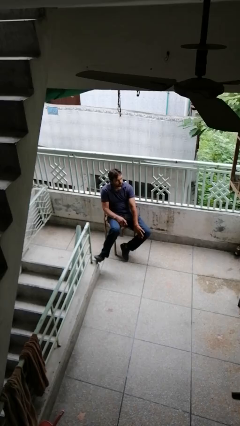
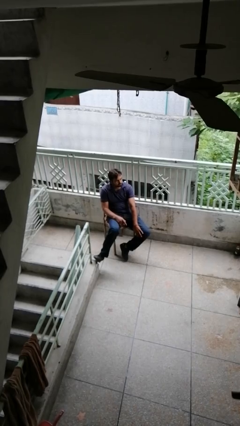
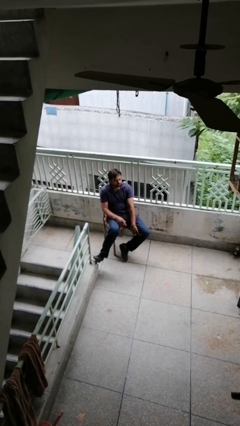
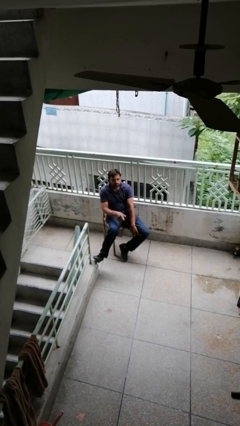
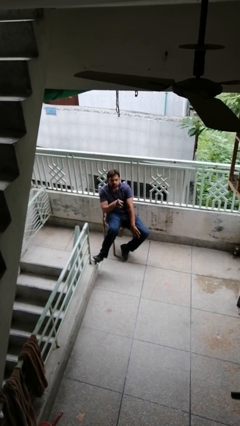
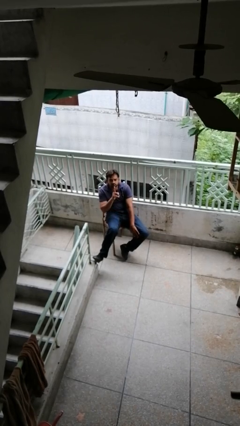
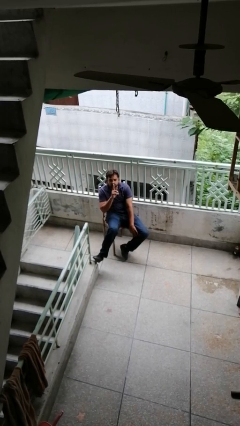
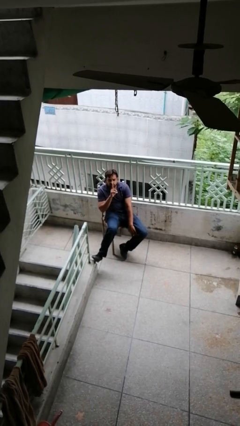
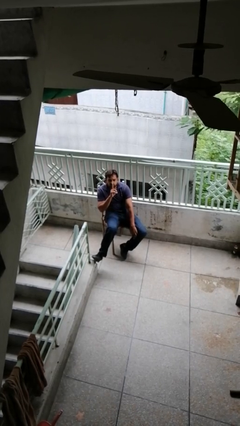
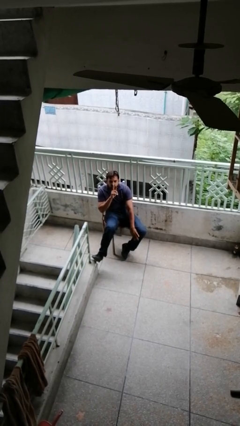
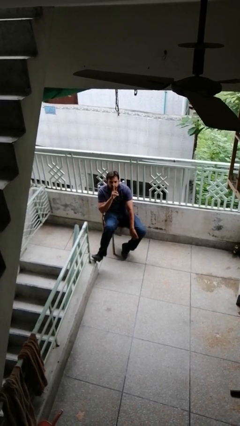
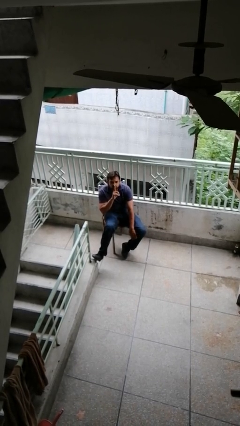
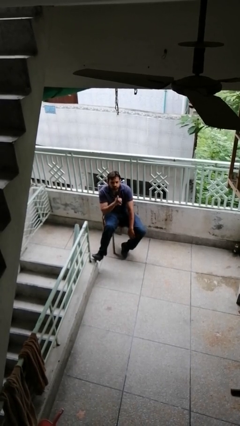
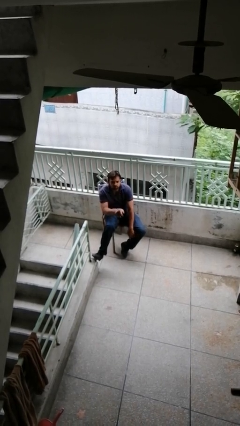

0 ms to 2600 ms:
person gestures be quiet

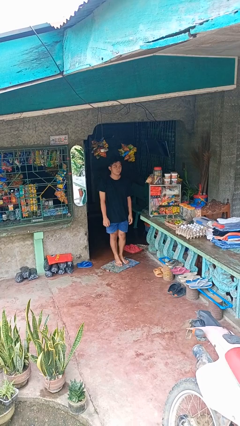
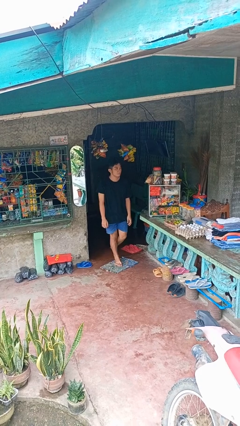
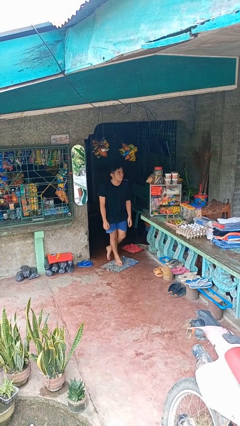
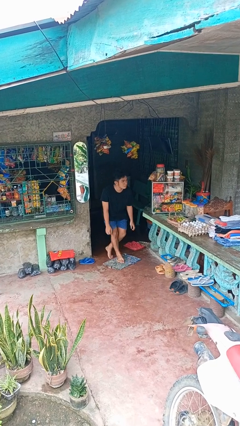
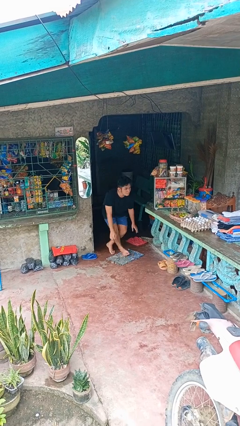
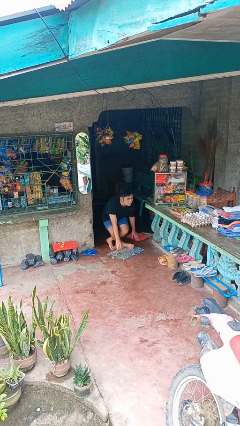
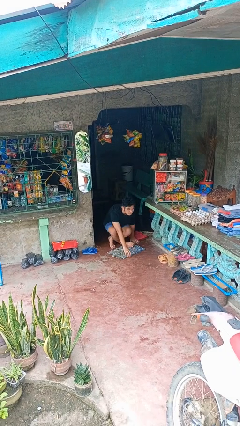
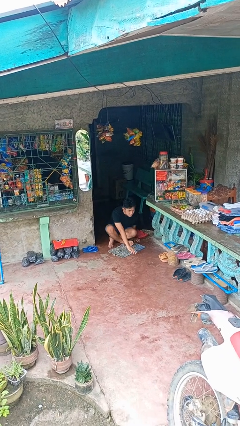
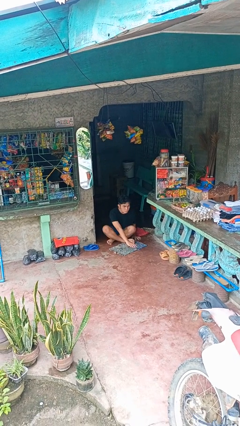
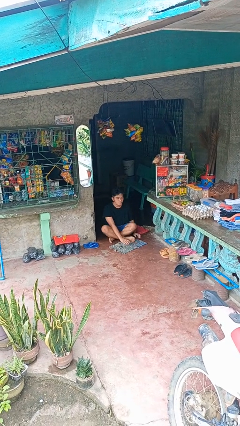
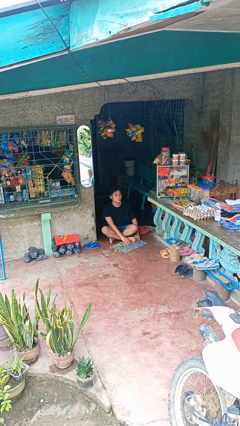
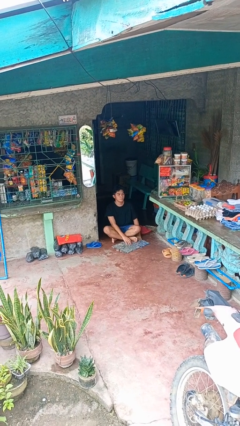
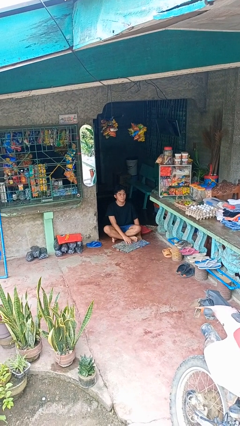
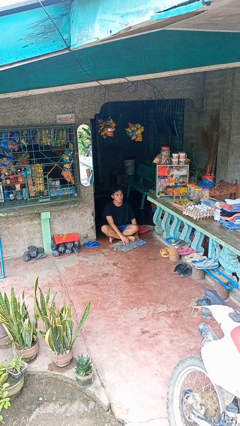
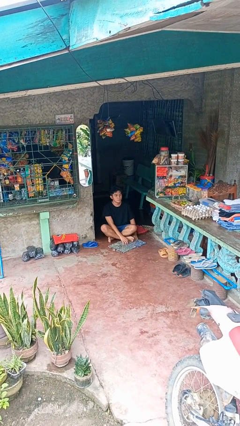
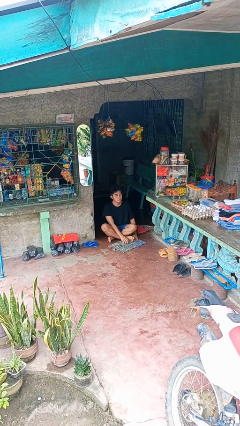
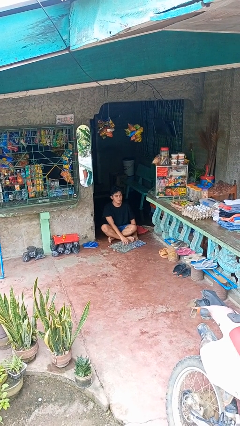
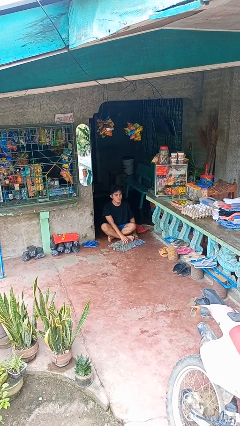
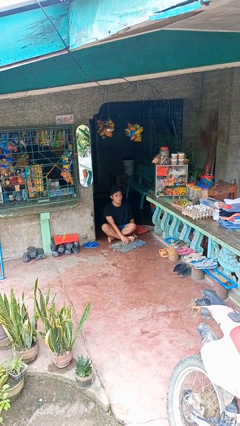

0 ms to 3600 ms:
person sits crisscross

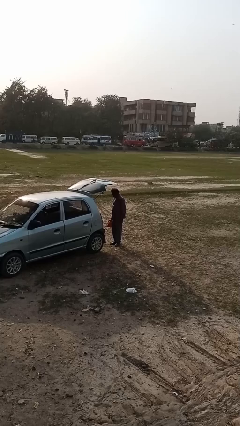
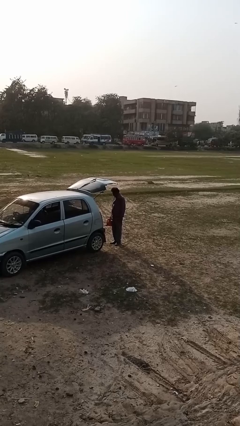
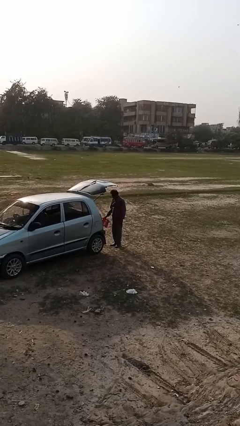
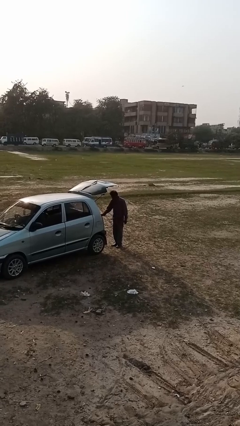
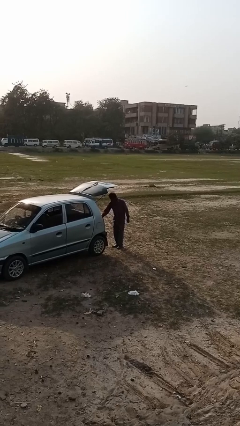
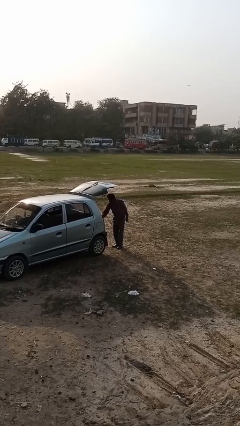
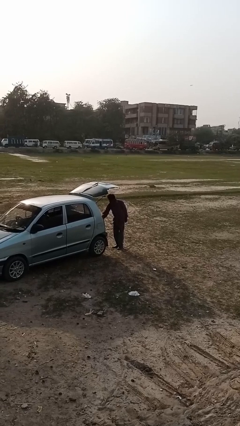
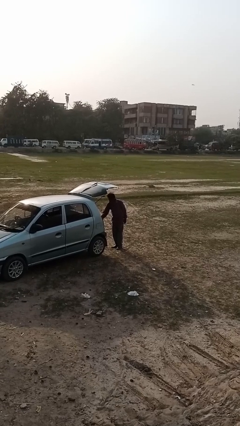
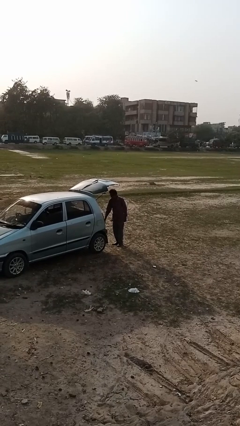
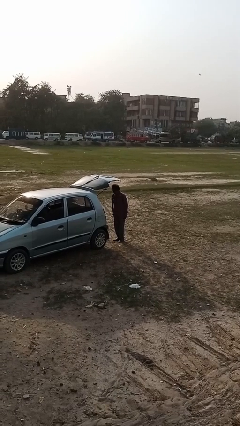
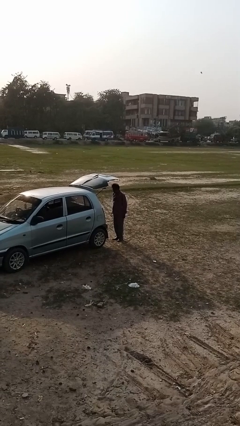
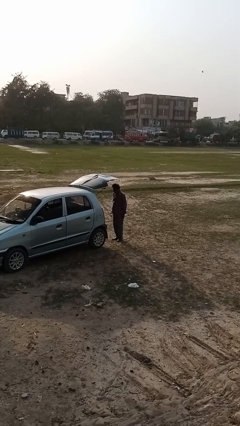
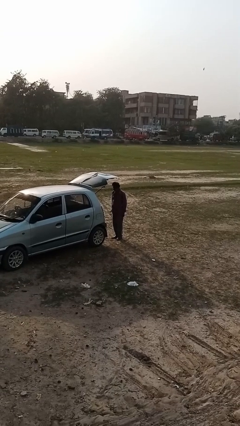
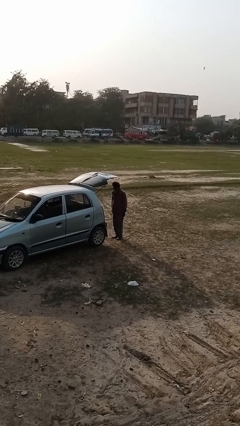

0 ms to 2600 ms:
person loads car

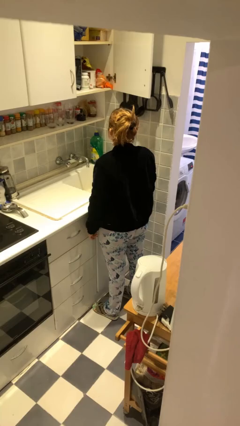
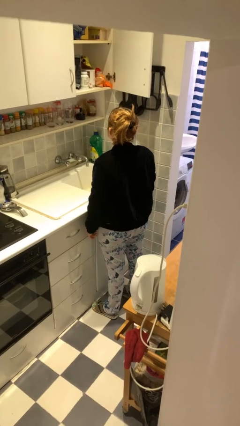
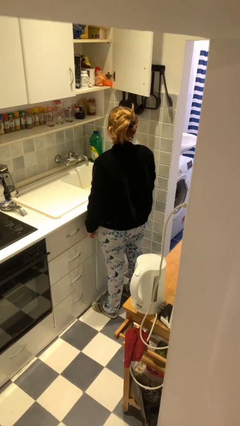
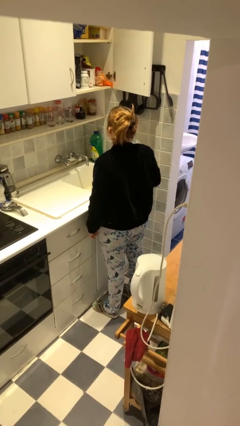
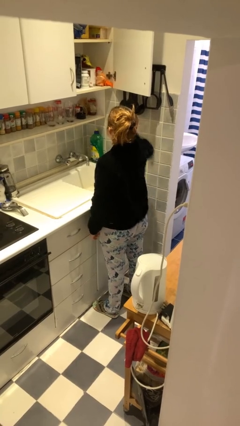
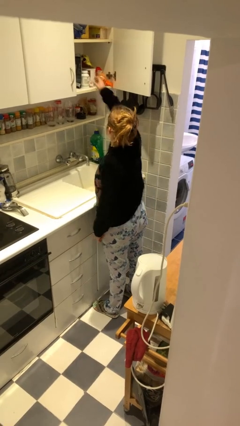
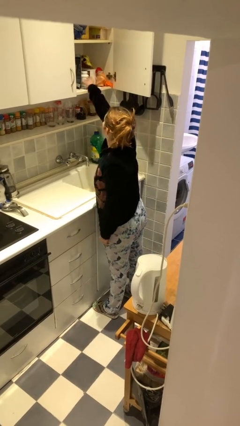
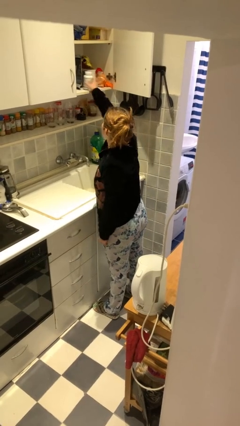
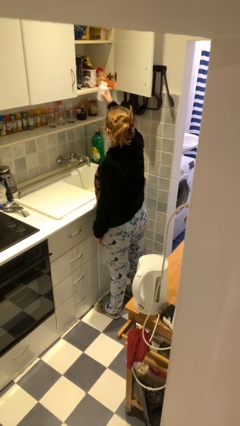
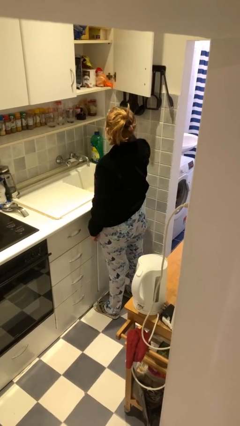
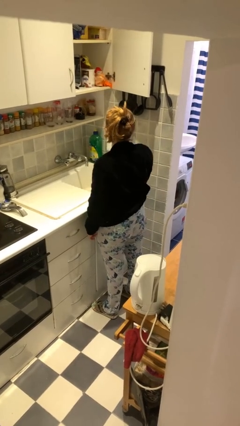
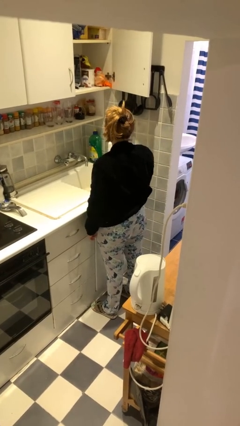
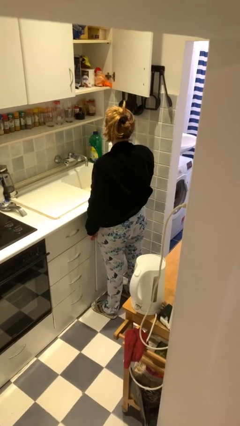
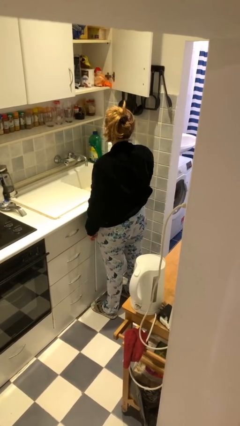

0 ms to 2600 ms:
person puts object in cabinet

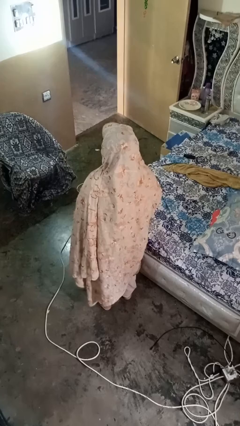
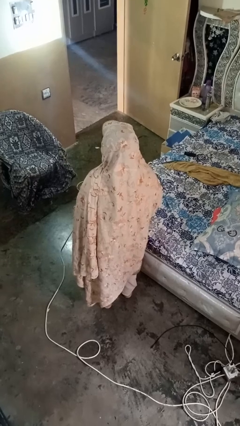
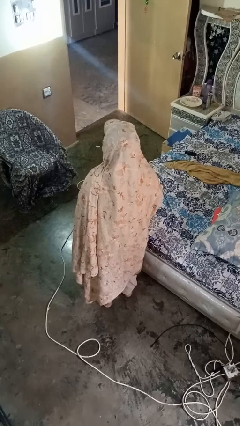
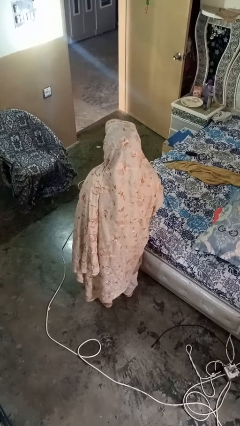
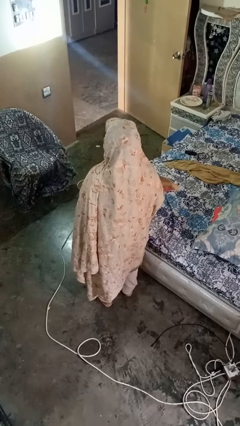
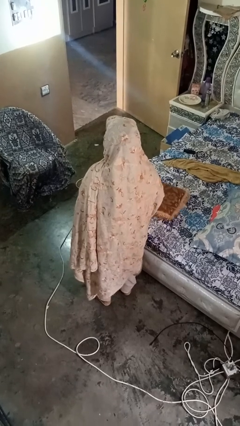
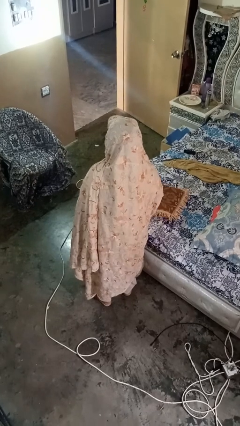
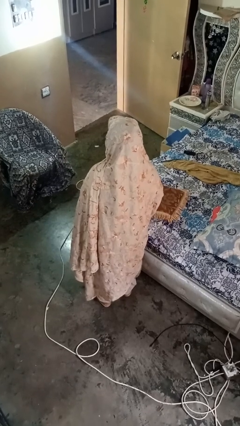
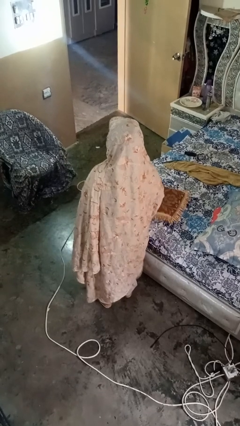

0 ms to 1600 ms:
person puts down object on bed

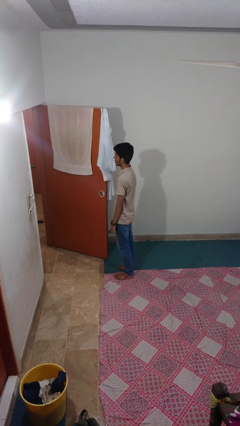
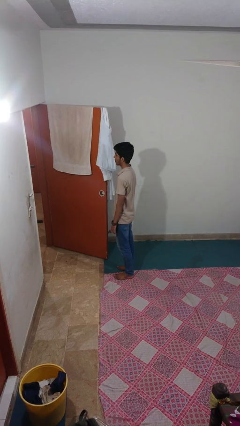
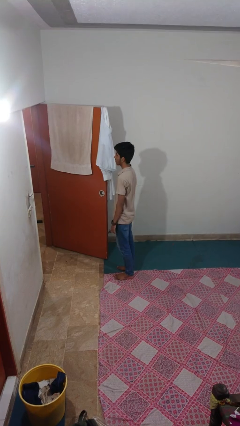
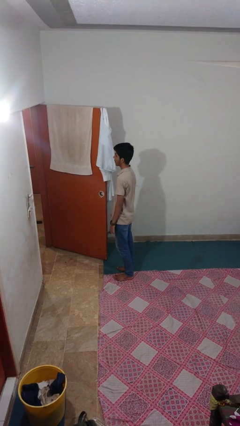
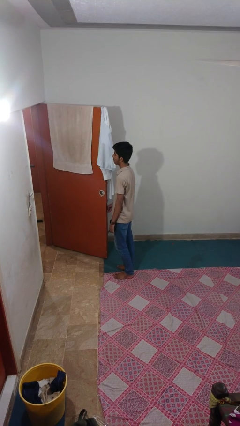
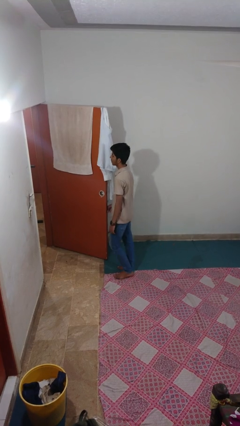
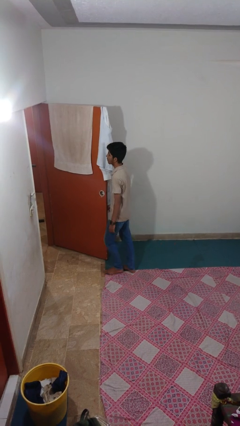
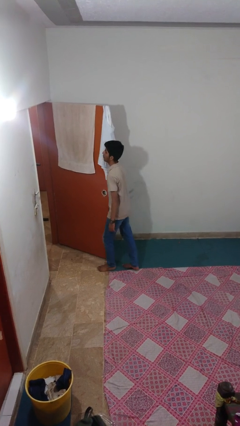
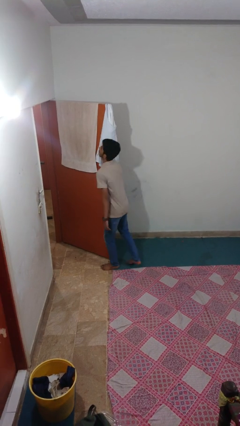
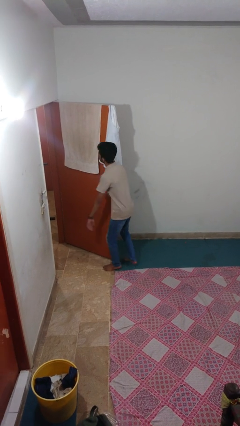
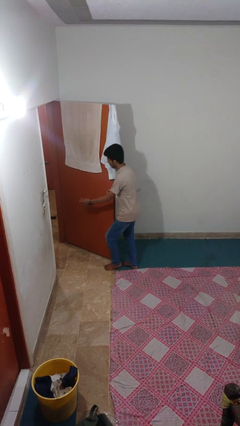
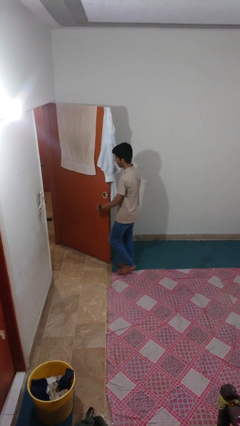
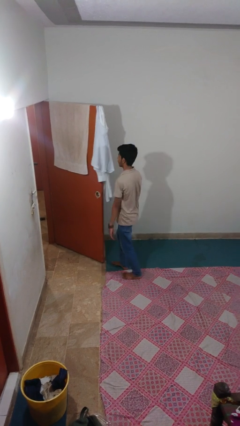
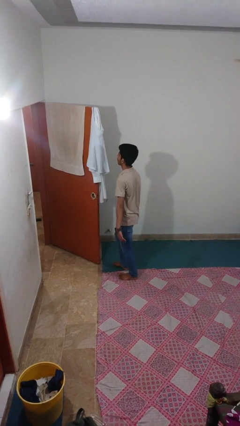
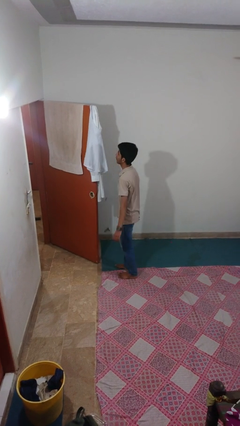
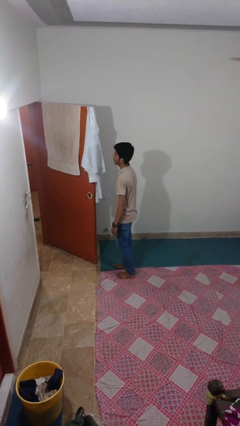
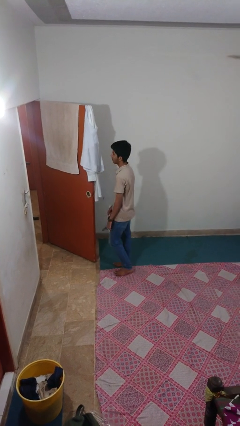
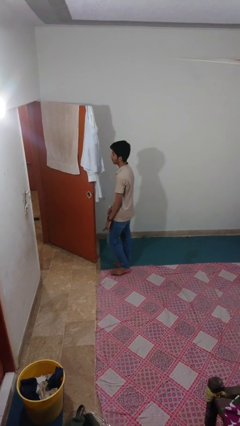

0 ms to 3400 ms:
person bumps into wall

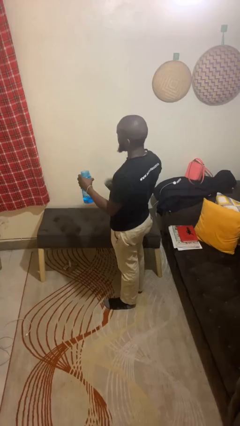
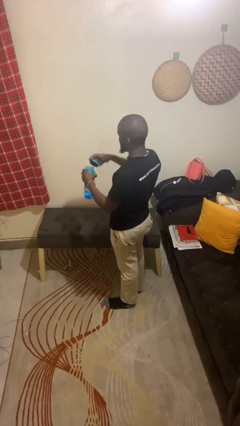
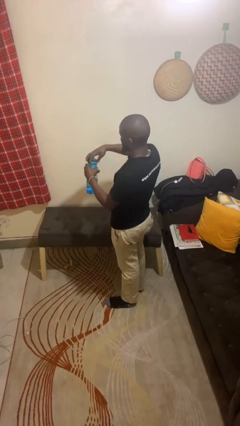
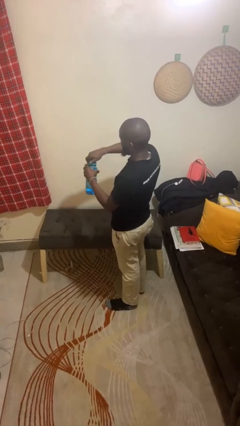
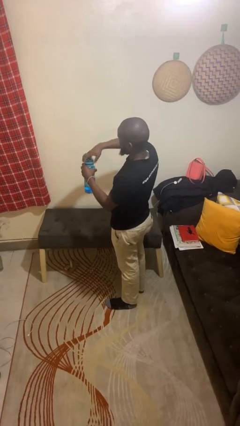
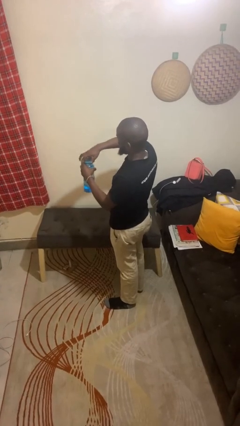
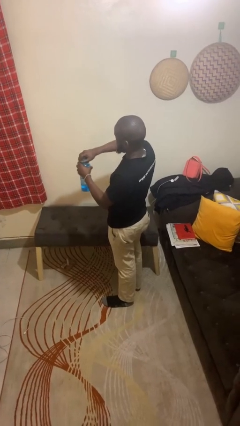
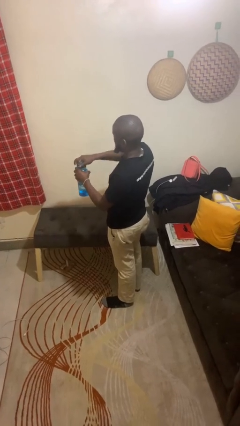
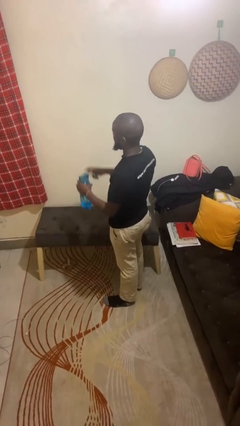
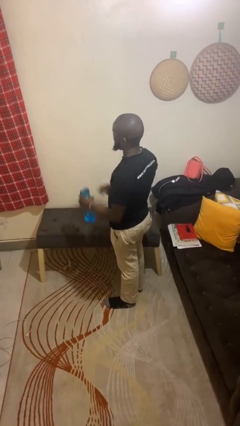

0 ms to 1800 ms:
person closes jar
